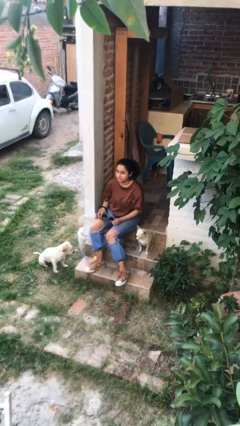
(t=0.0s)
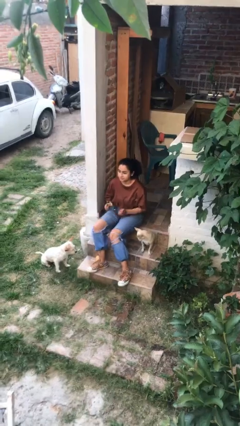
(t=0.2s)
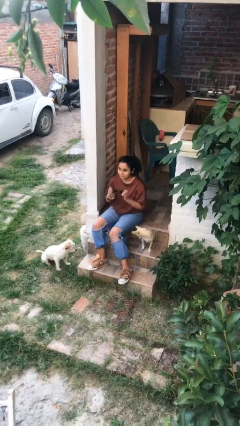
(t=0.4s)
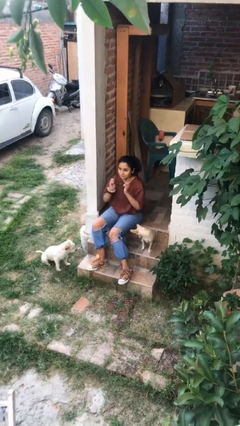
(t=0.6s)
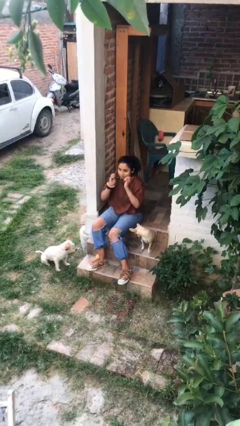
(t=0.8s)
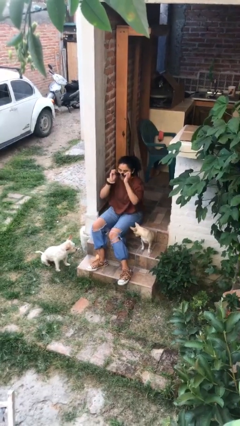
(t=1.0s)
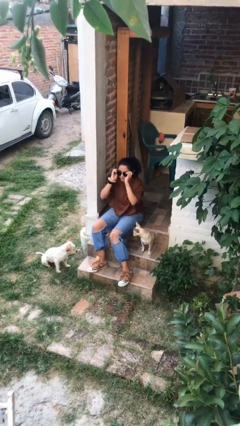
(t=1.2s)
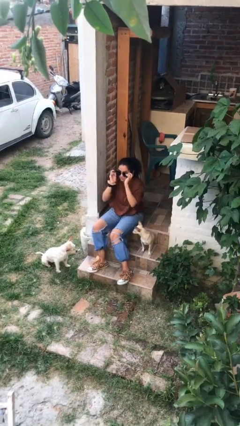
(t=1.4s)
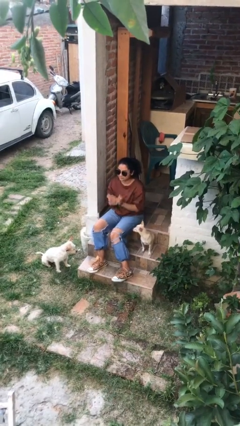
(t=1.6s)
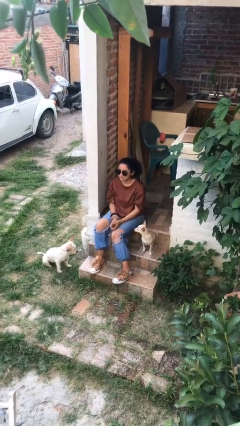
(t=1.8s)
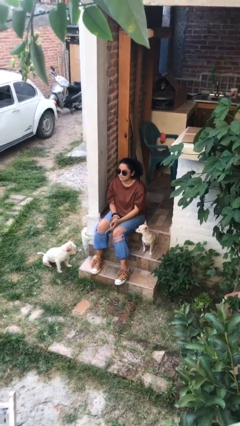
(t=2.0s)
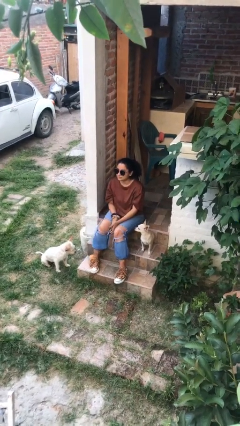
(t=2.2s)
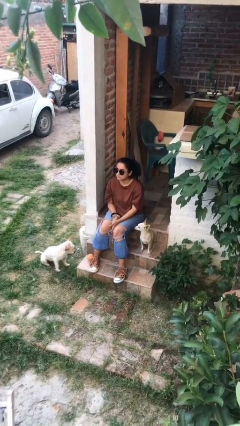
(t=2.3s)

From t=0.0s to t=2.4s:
person puts on sunglasses

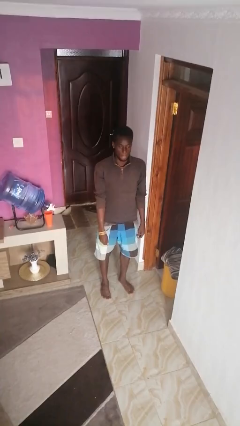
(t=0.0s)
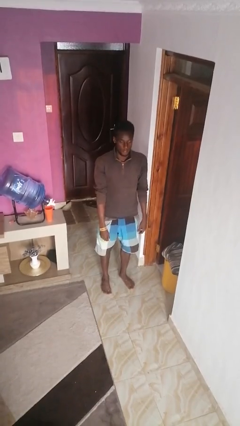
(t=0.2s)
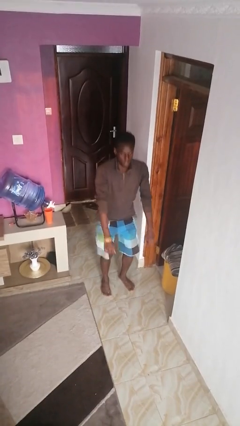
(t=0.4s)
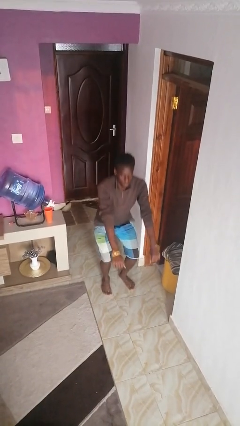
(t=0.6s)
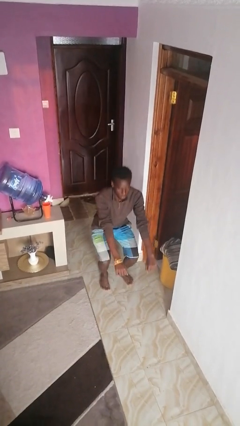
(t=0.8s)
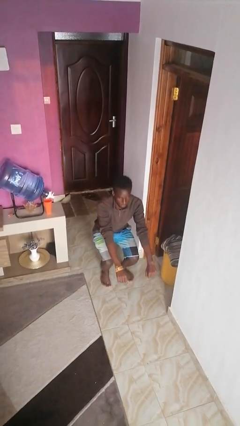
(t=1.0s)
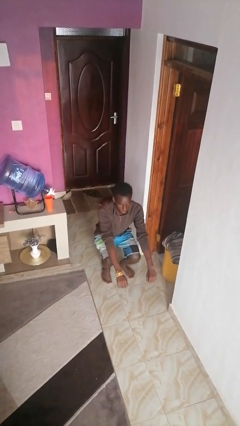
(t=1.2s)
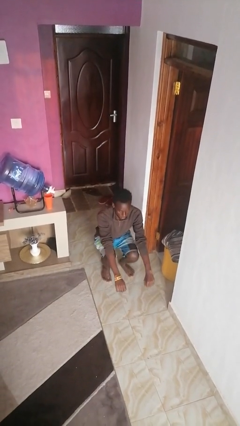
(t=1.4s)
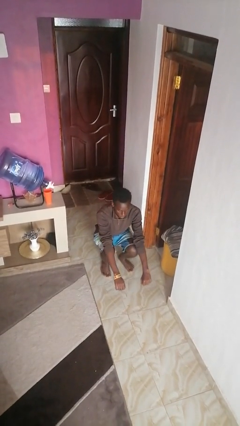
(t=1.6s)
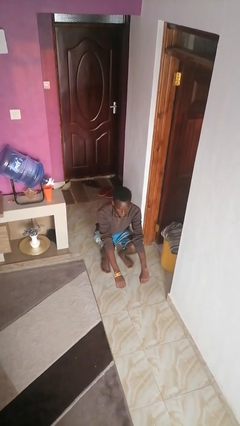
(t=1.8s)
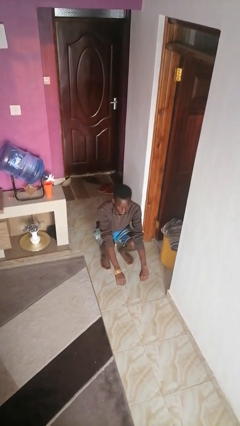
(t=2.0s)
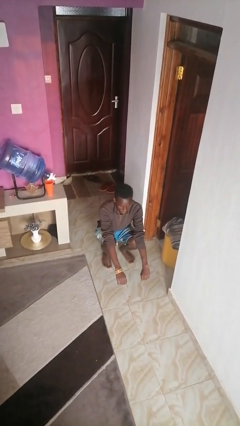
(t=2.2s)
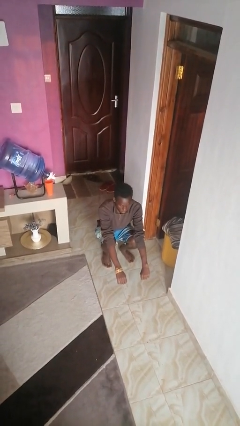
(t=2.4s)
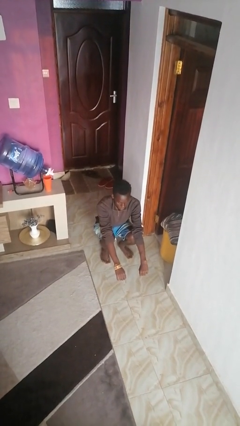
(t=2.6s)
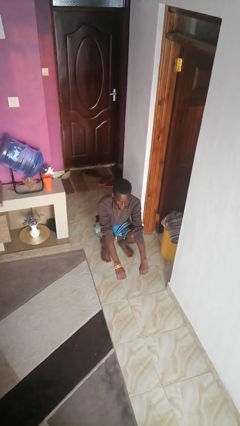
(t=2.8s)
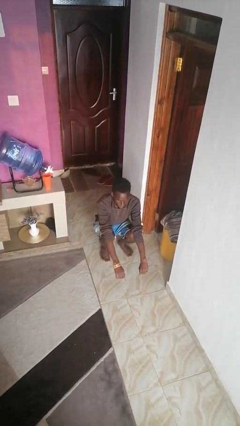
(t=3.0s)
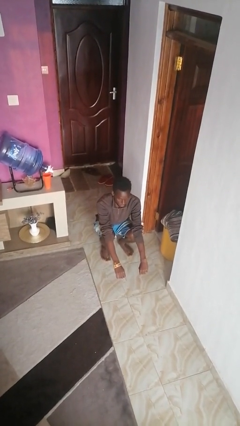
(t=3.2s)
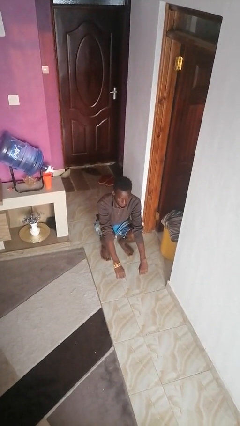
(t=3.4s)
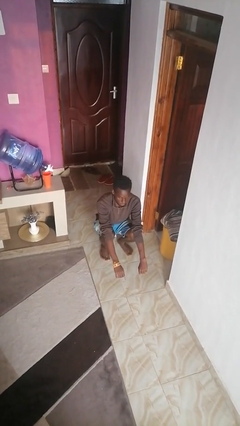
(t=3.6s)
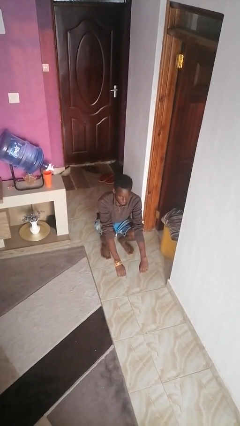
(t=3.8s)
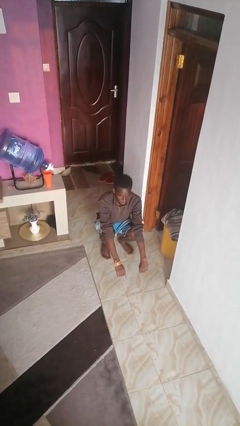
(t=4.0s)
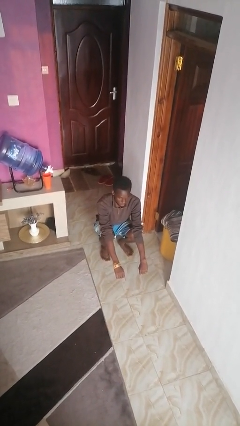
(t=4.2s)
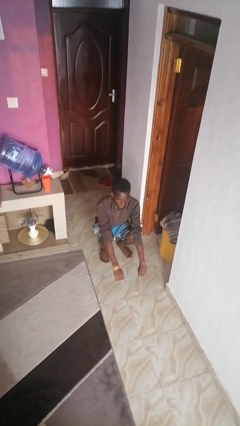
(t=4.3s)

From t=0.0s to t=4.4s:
person squats

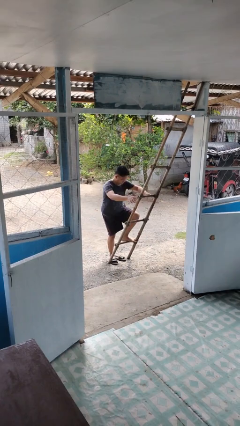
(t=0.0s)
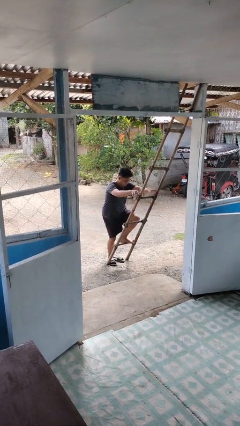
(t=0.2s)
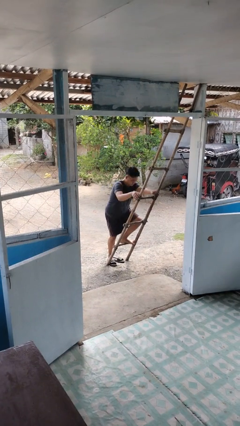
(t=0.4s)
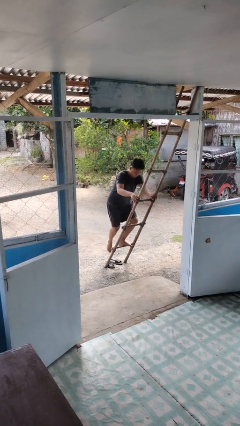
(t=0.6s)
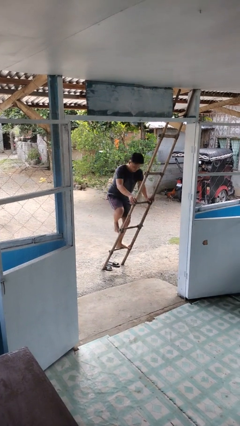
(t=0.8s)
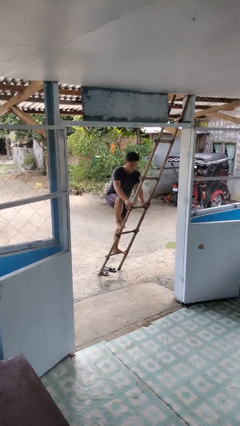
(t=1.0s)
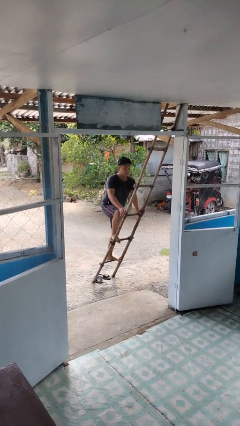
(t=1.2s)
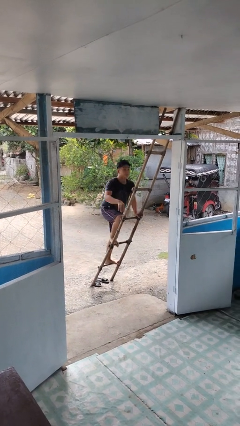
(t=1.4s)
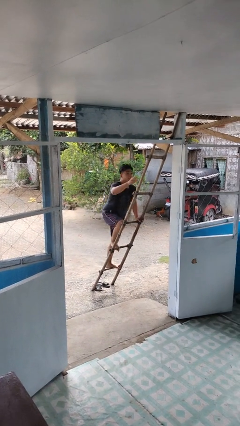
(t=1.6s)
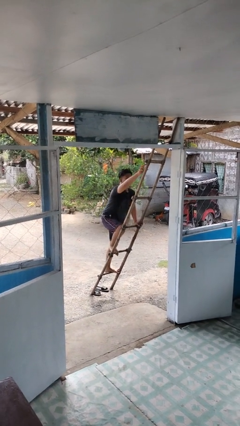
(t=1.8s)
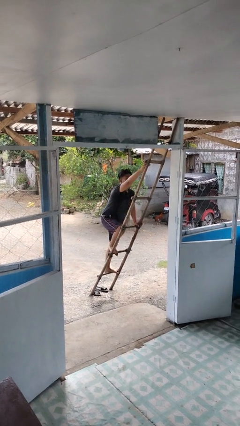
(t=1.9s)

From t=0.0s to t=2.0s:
person climbs up ladder

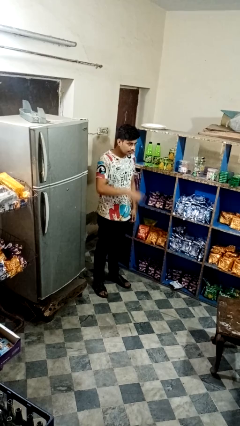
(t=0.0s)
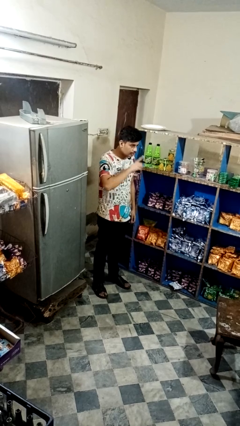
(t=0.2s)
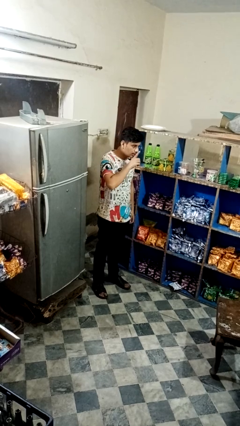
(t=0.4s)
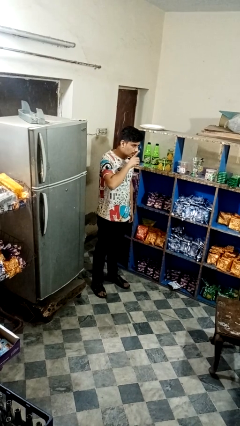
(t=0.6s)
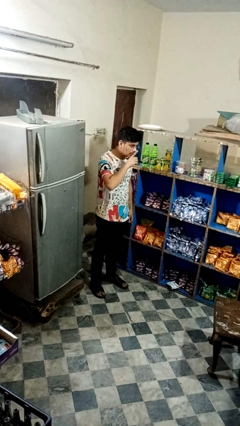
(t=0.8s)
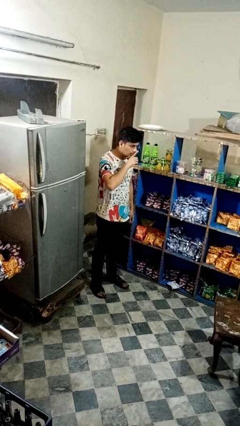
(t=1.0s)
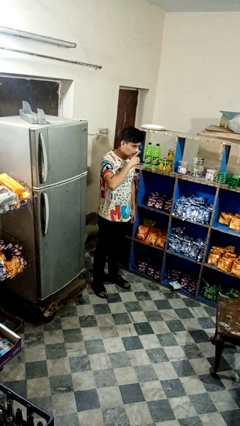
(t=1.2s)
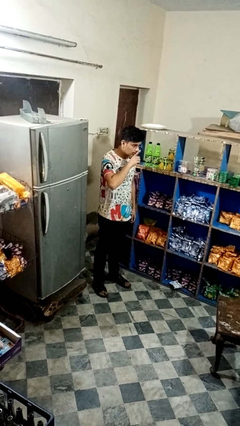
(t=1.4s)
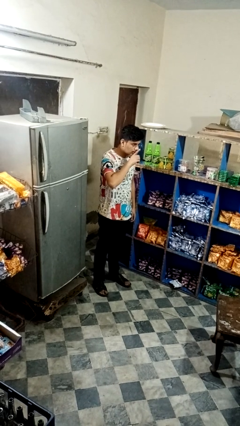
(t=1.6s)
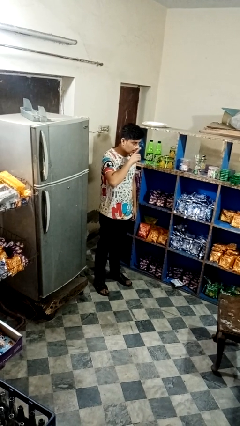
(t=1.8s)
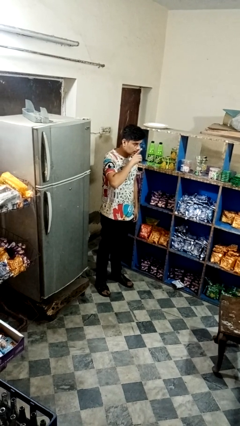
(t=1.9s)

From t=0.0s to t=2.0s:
person gestures be quiet

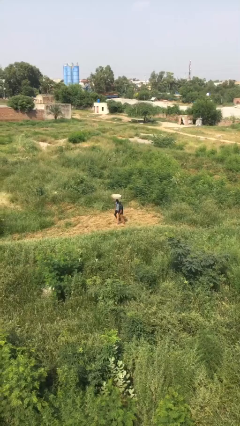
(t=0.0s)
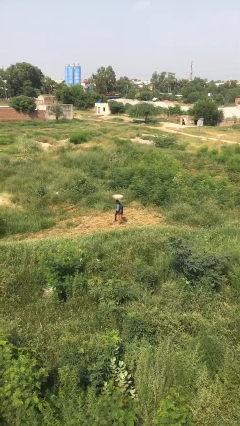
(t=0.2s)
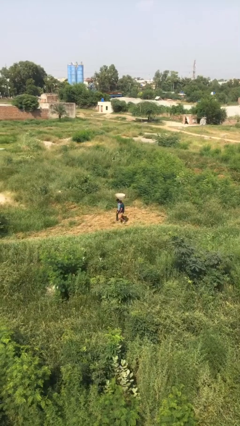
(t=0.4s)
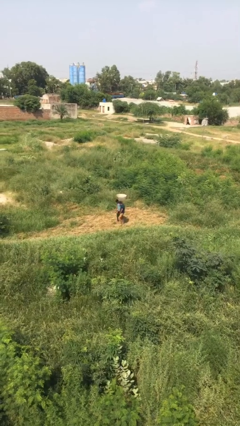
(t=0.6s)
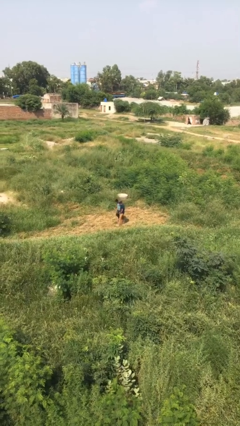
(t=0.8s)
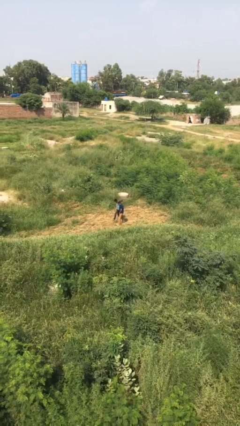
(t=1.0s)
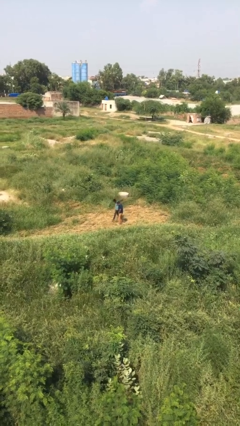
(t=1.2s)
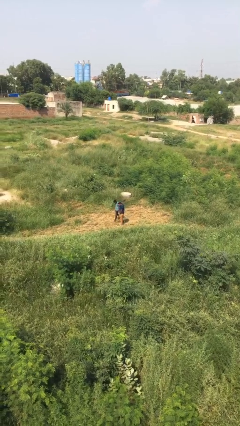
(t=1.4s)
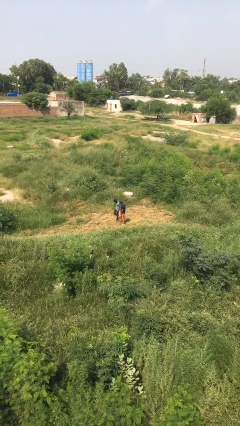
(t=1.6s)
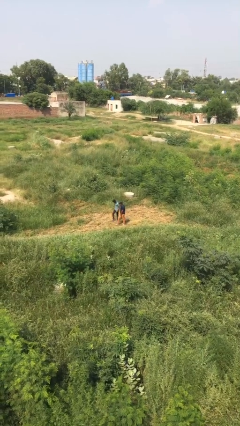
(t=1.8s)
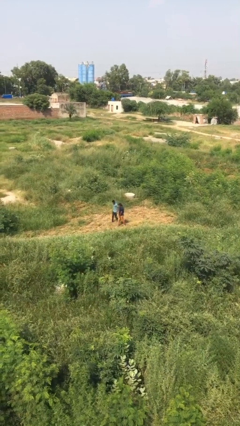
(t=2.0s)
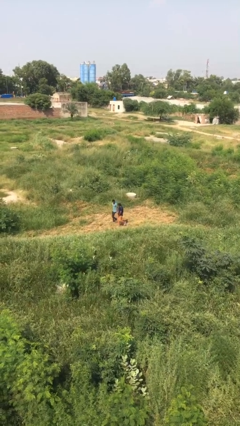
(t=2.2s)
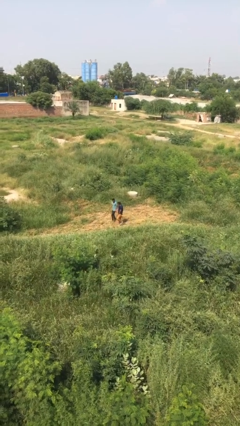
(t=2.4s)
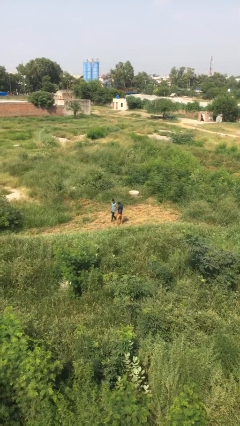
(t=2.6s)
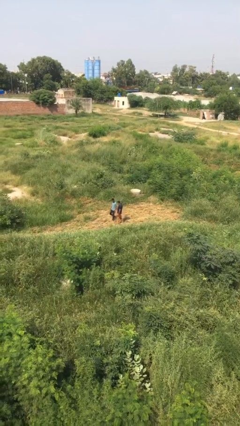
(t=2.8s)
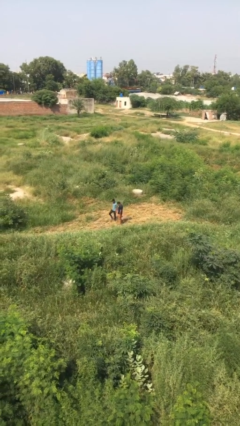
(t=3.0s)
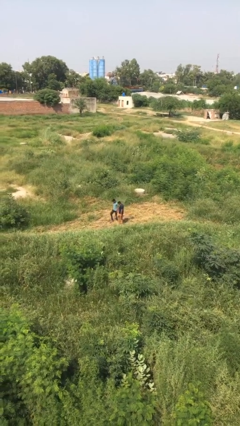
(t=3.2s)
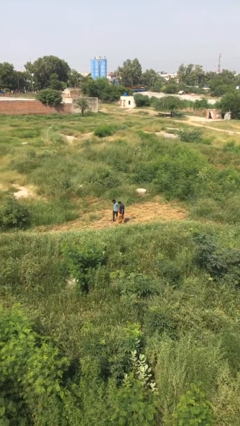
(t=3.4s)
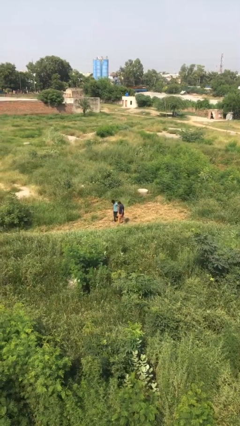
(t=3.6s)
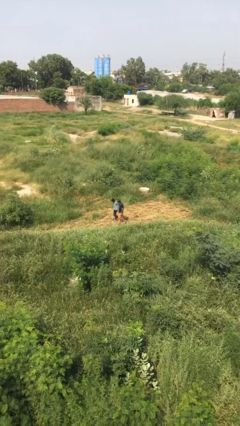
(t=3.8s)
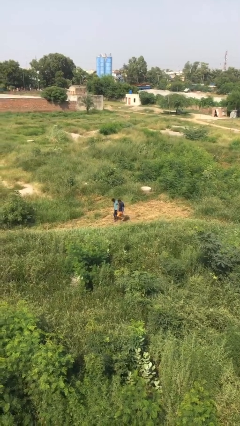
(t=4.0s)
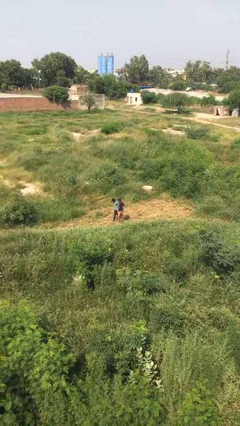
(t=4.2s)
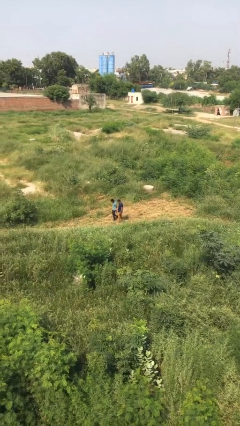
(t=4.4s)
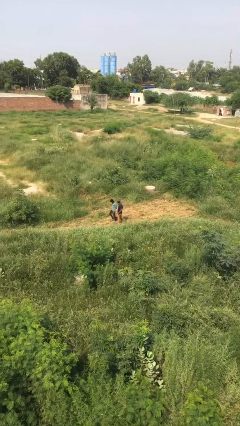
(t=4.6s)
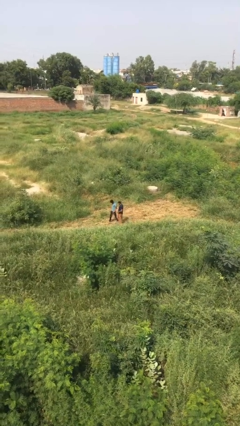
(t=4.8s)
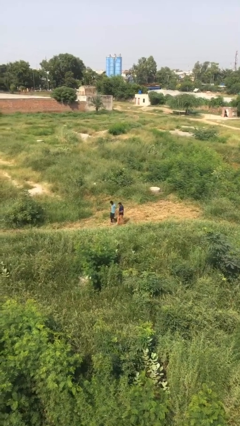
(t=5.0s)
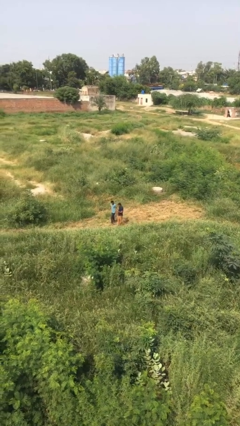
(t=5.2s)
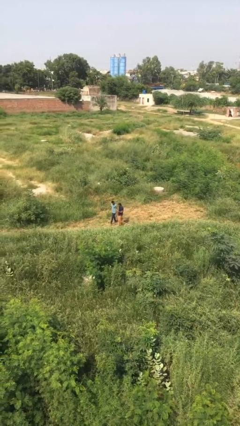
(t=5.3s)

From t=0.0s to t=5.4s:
person talks to person

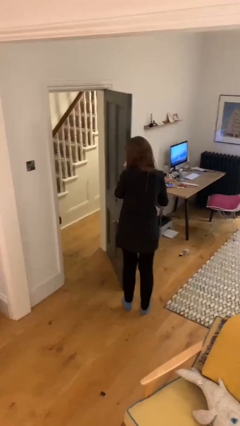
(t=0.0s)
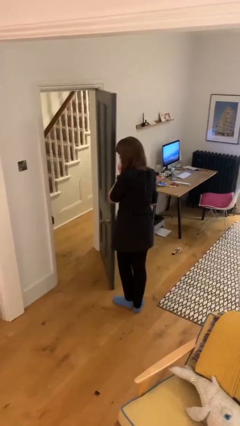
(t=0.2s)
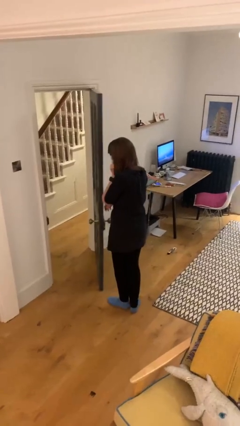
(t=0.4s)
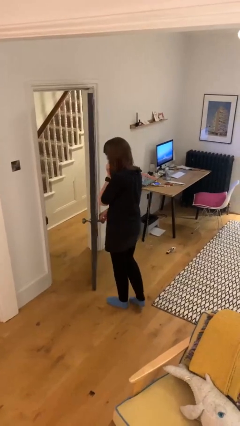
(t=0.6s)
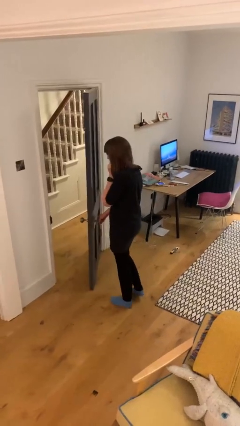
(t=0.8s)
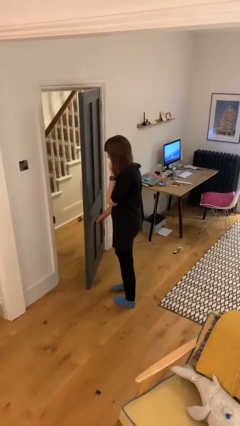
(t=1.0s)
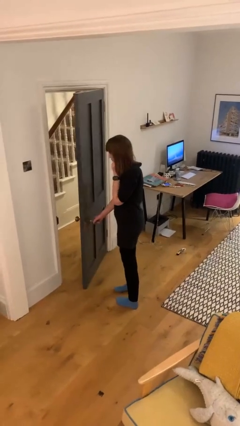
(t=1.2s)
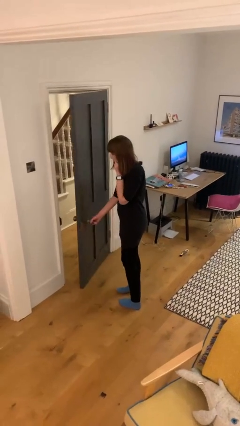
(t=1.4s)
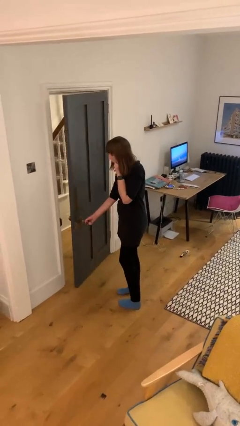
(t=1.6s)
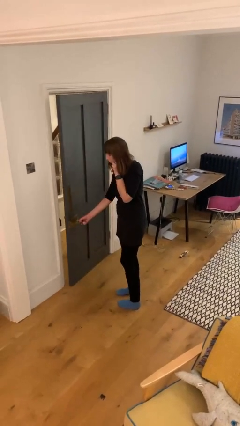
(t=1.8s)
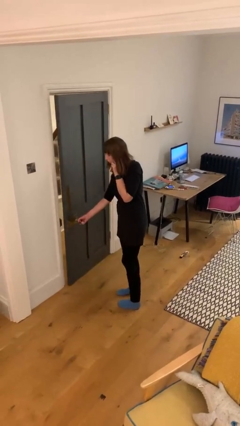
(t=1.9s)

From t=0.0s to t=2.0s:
person closes facility door
